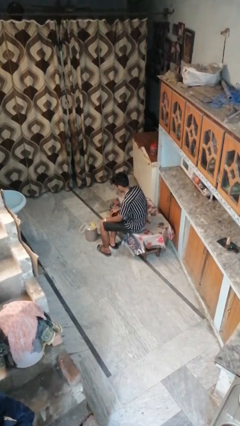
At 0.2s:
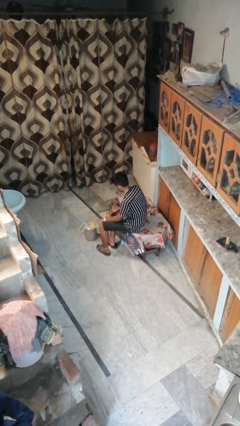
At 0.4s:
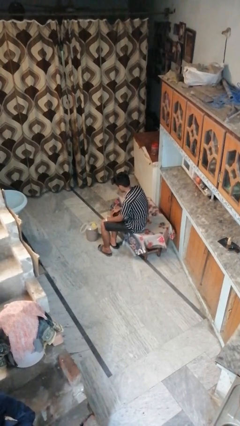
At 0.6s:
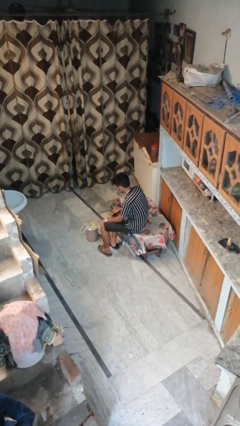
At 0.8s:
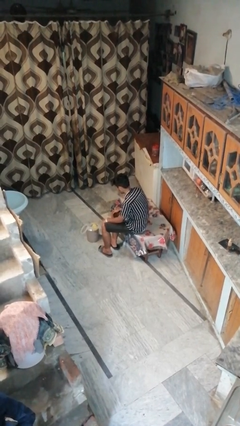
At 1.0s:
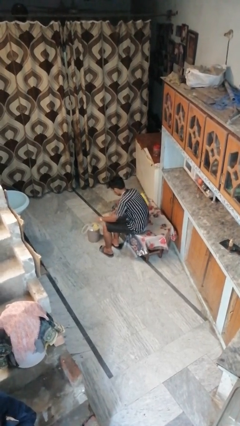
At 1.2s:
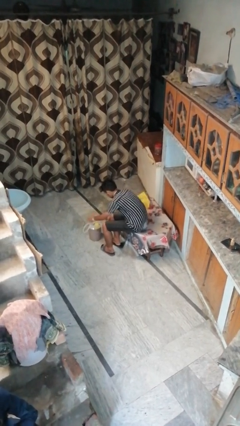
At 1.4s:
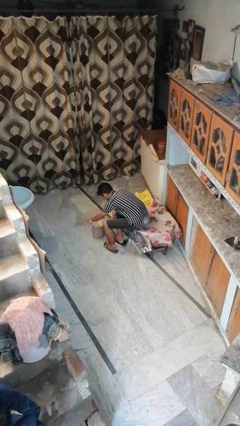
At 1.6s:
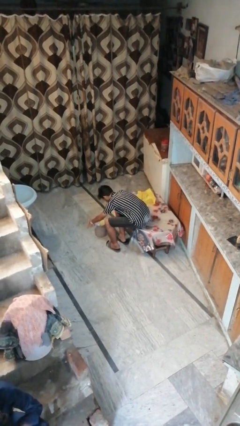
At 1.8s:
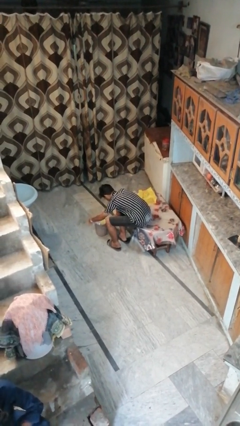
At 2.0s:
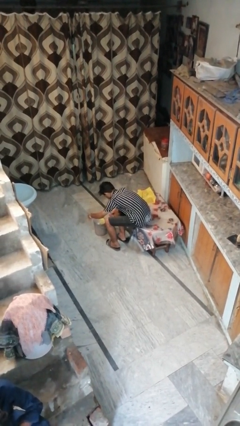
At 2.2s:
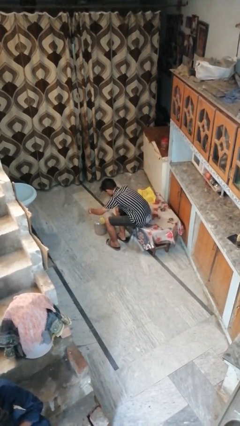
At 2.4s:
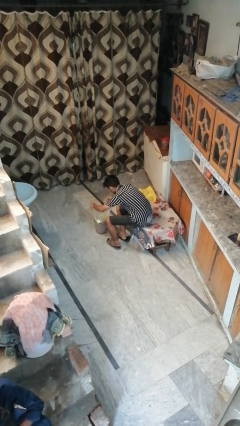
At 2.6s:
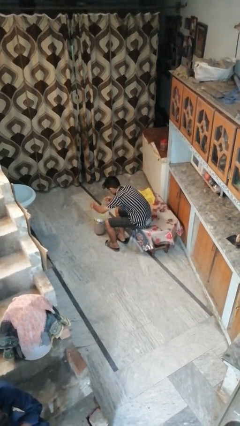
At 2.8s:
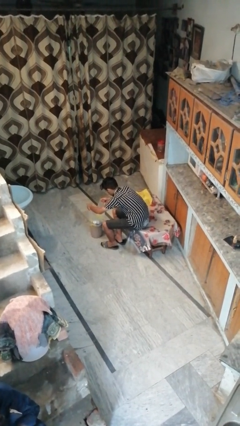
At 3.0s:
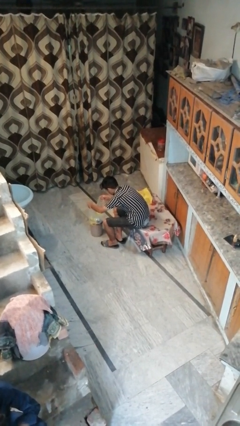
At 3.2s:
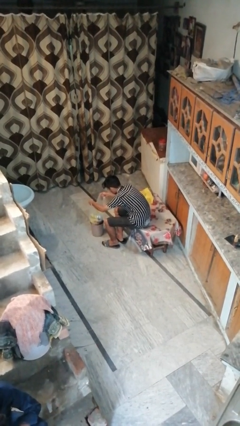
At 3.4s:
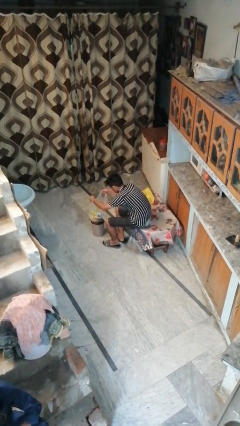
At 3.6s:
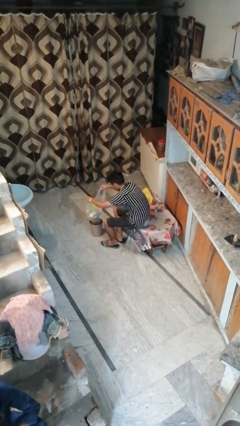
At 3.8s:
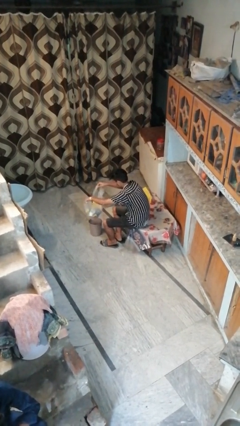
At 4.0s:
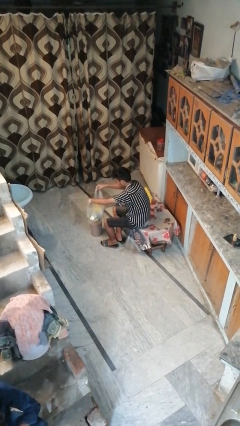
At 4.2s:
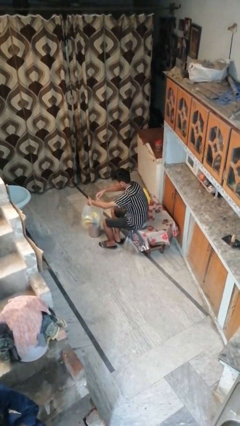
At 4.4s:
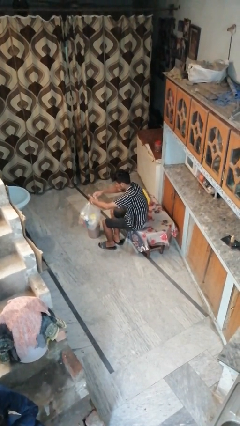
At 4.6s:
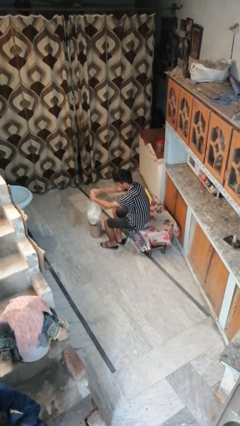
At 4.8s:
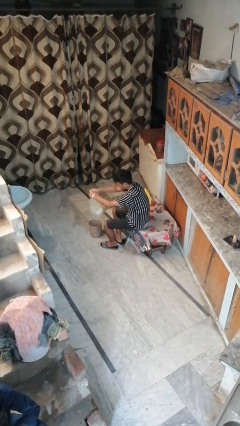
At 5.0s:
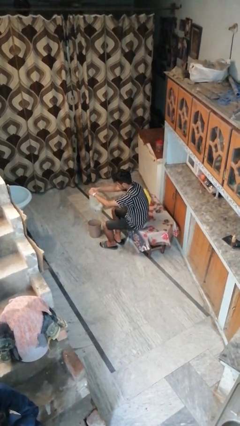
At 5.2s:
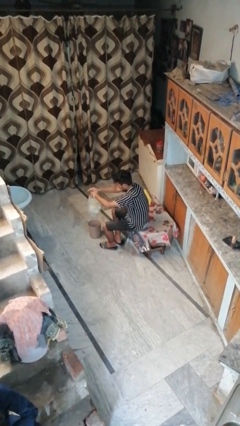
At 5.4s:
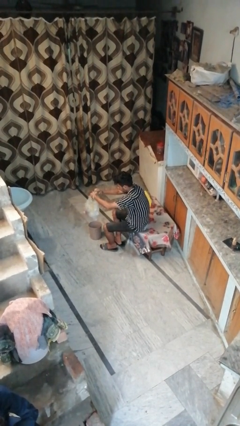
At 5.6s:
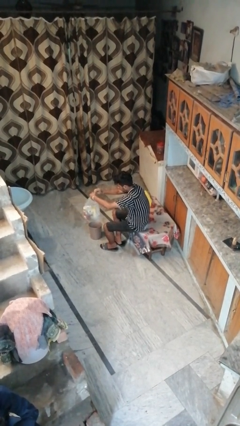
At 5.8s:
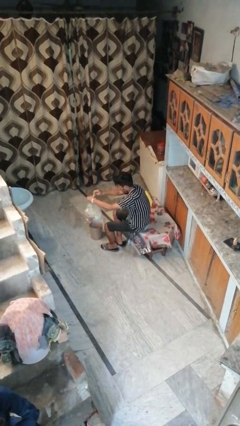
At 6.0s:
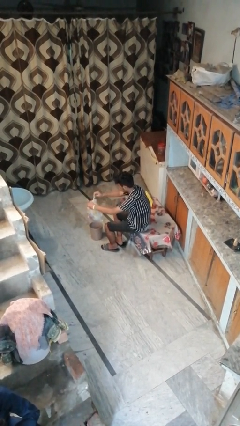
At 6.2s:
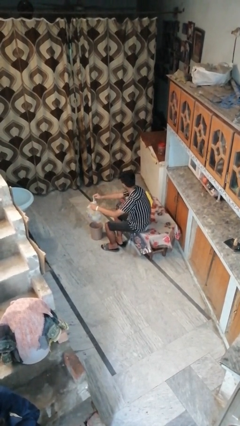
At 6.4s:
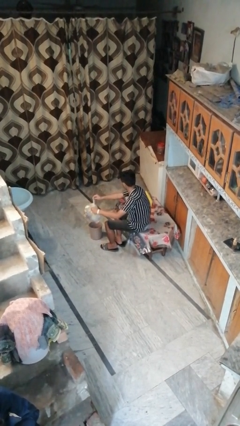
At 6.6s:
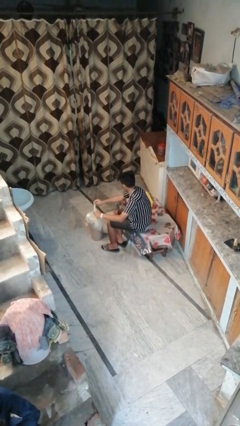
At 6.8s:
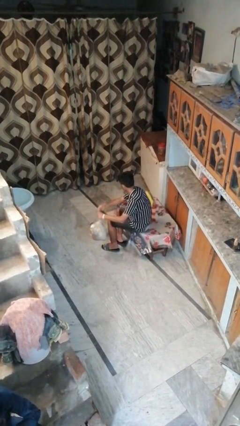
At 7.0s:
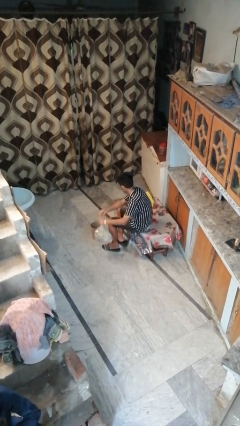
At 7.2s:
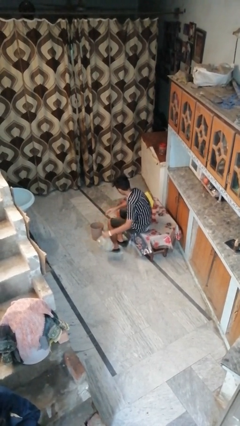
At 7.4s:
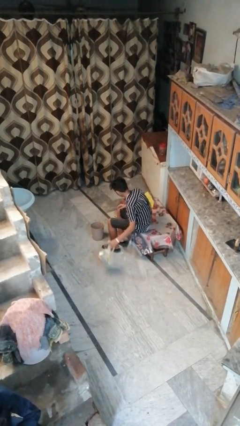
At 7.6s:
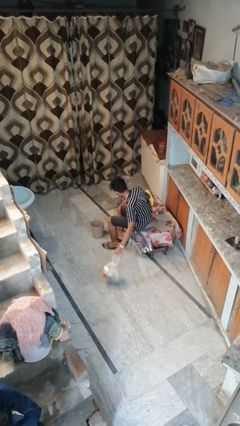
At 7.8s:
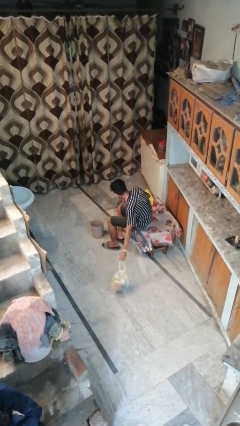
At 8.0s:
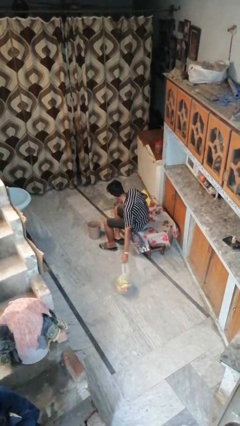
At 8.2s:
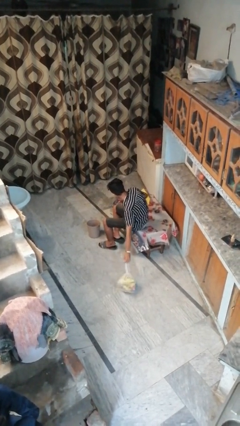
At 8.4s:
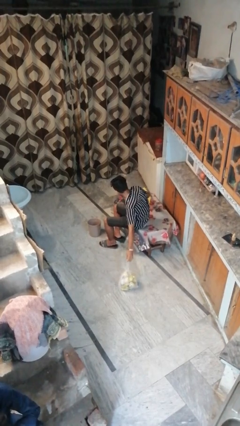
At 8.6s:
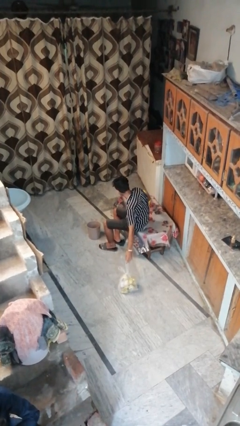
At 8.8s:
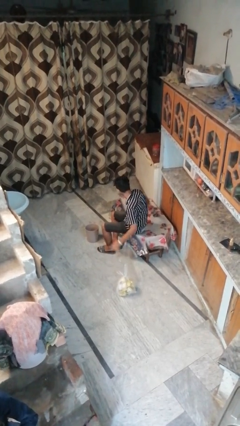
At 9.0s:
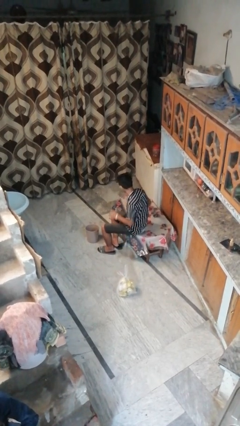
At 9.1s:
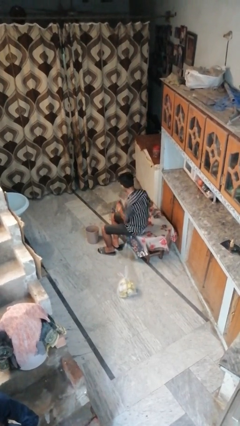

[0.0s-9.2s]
person removes trashbag from trashcan

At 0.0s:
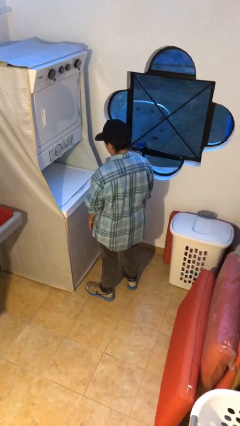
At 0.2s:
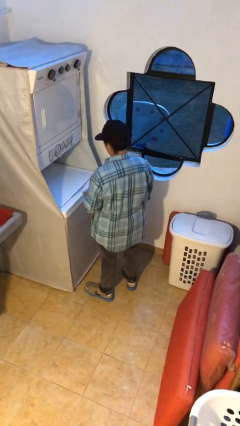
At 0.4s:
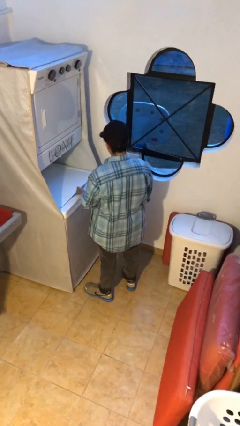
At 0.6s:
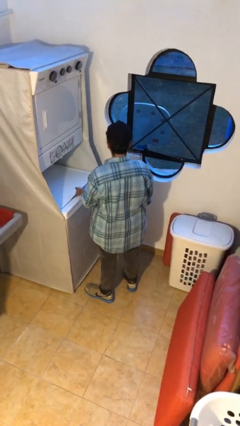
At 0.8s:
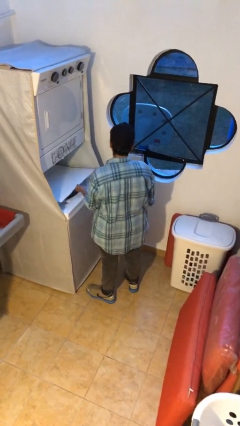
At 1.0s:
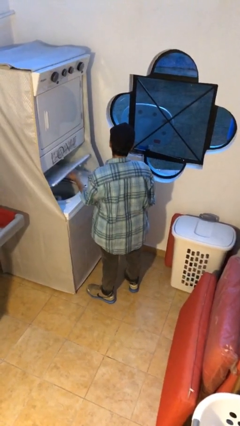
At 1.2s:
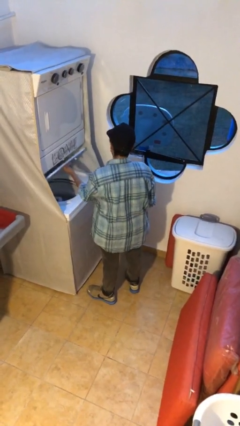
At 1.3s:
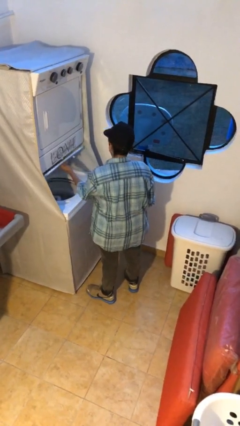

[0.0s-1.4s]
person opens clothes washer

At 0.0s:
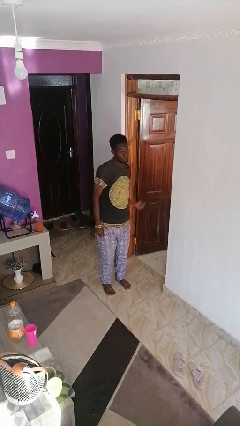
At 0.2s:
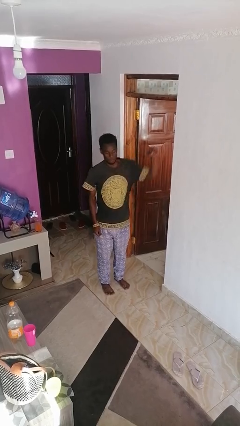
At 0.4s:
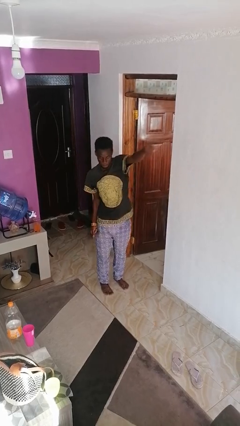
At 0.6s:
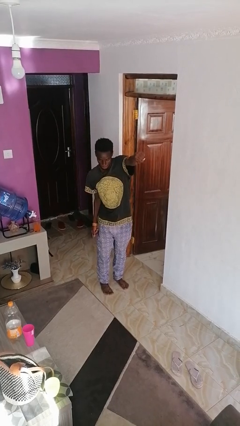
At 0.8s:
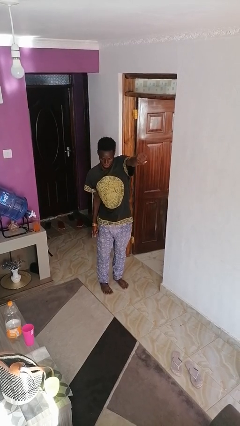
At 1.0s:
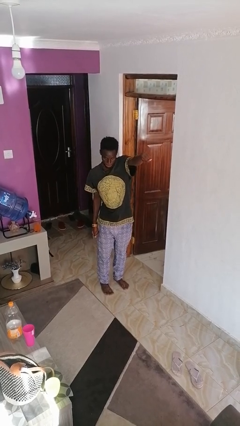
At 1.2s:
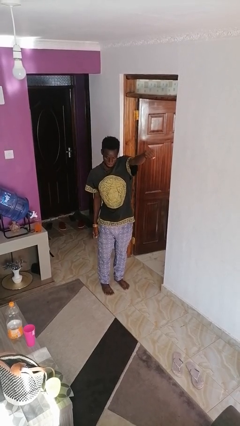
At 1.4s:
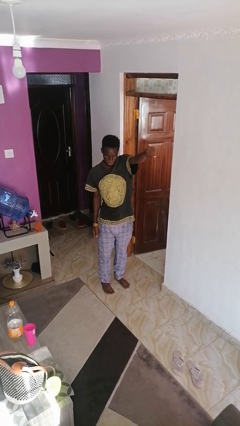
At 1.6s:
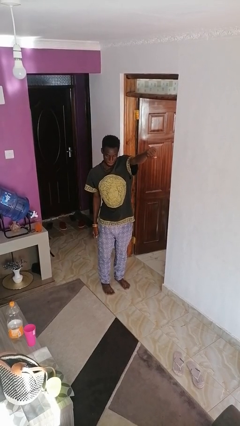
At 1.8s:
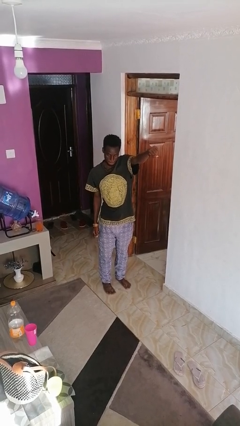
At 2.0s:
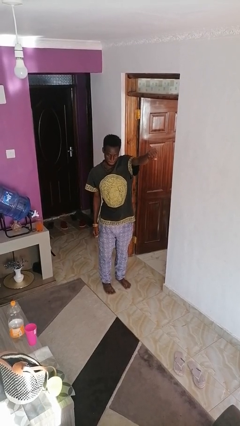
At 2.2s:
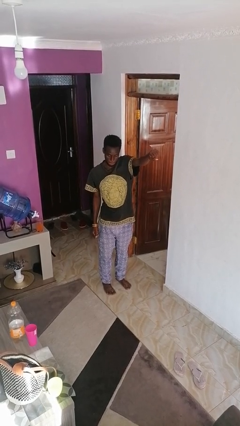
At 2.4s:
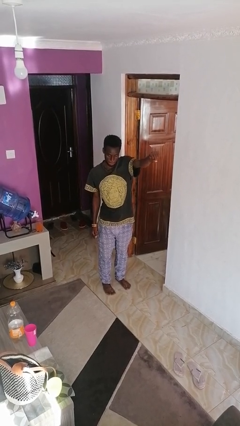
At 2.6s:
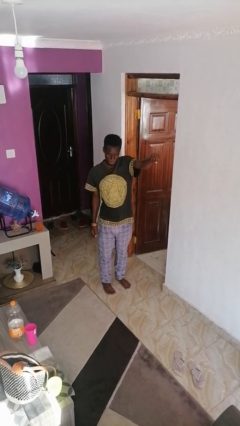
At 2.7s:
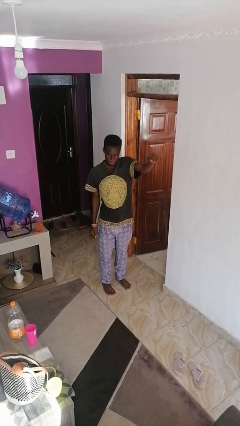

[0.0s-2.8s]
person punches

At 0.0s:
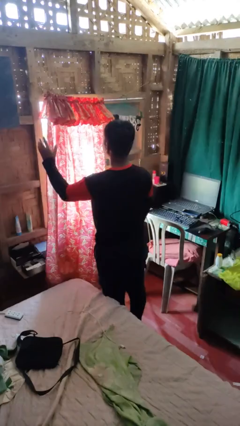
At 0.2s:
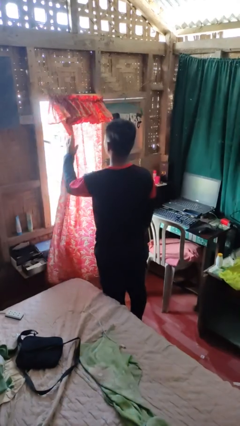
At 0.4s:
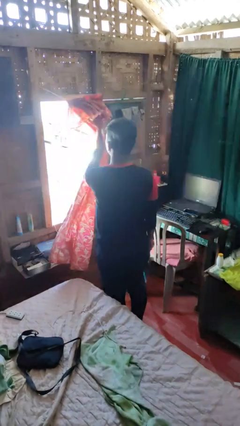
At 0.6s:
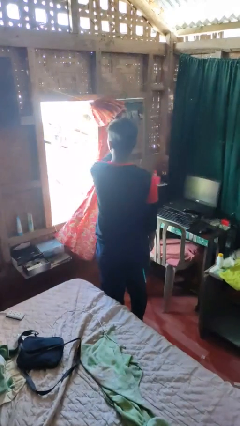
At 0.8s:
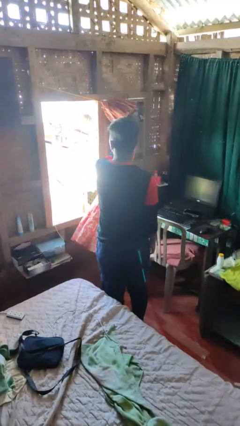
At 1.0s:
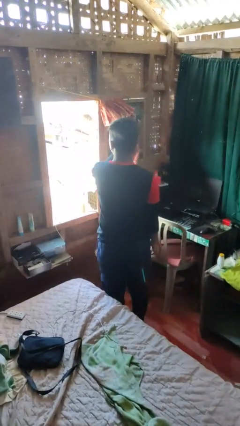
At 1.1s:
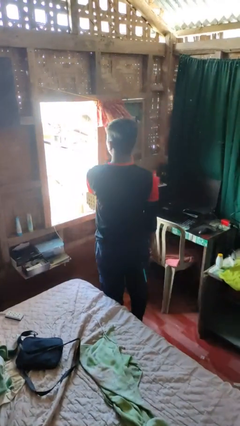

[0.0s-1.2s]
person opens curtains

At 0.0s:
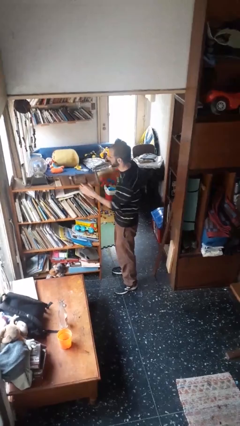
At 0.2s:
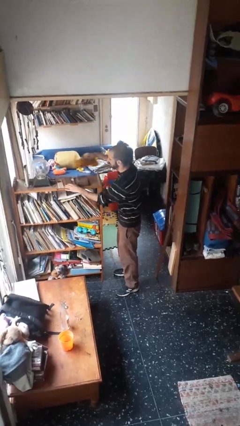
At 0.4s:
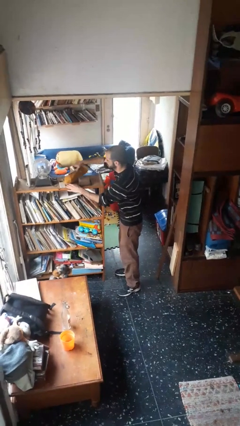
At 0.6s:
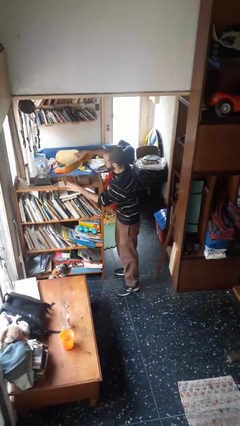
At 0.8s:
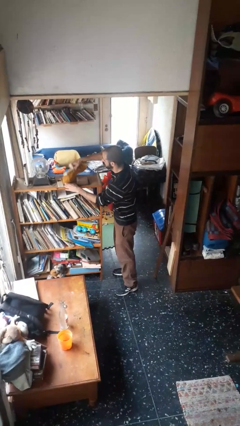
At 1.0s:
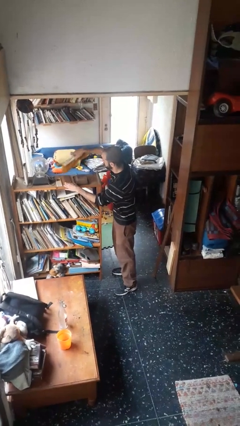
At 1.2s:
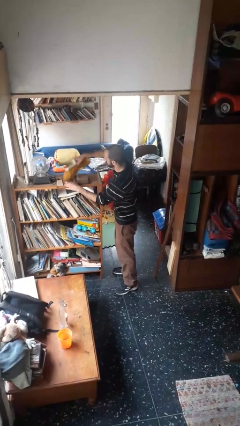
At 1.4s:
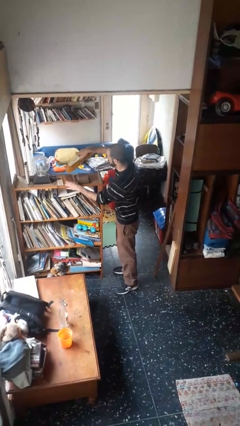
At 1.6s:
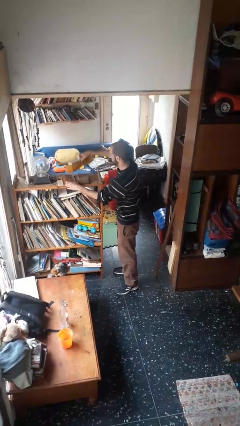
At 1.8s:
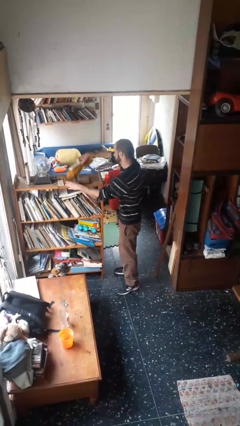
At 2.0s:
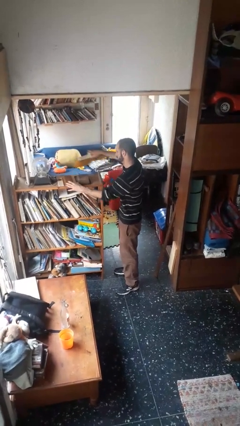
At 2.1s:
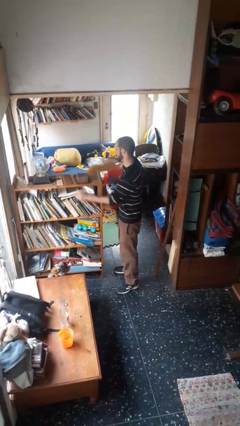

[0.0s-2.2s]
person dusts furniture

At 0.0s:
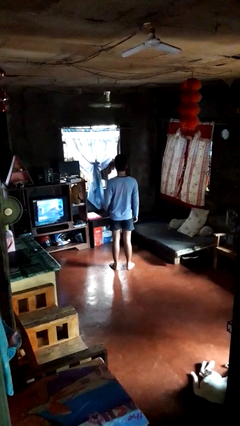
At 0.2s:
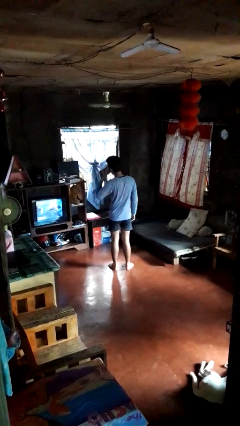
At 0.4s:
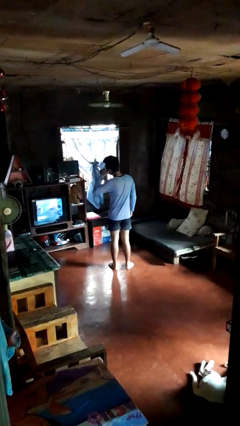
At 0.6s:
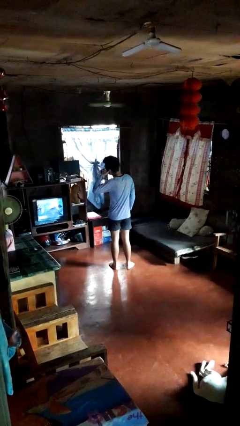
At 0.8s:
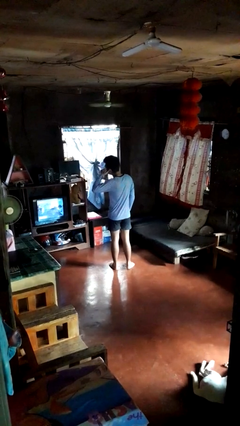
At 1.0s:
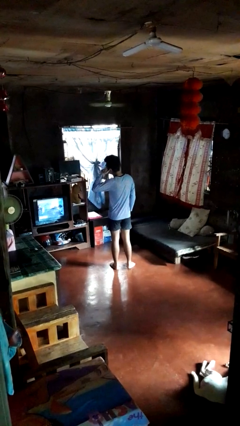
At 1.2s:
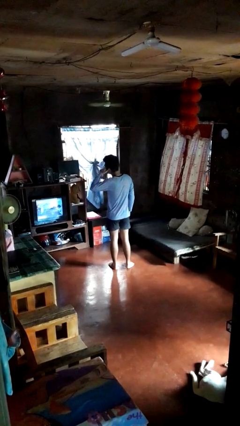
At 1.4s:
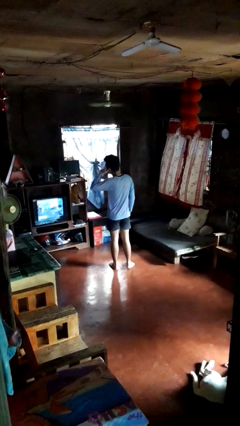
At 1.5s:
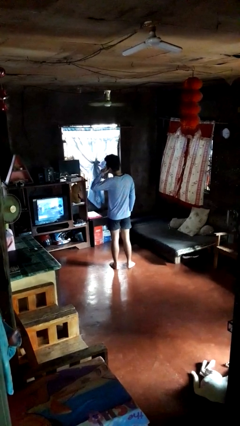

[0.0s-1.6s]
person gestures call me
